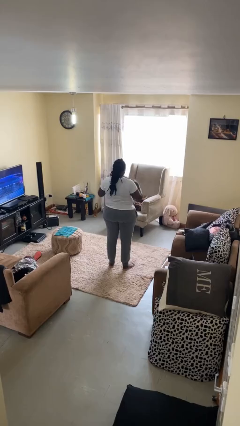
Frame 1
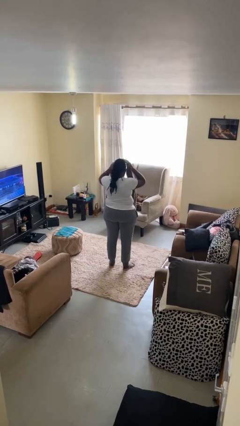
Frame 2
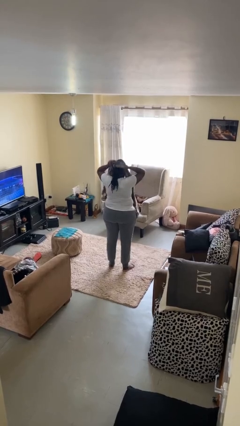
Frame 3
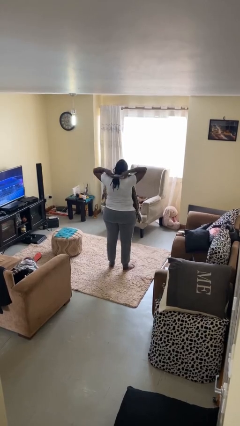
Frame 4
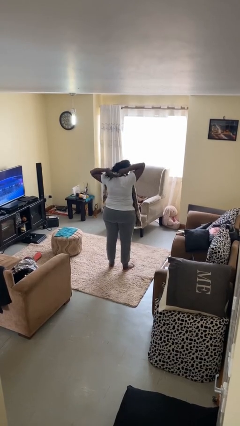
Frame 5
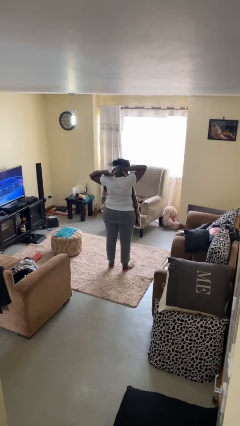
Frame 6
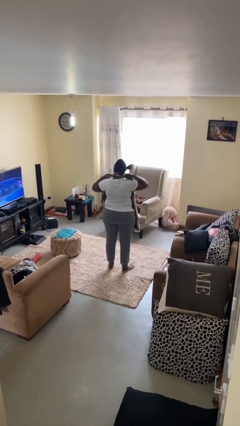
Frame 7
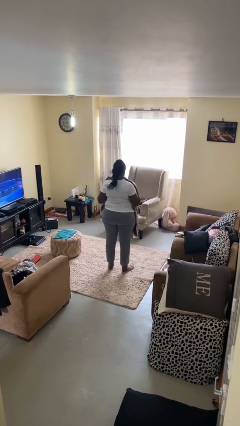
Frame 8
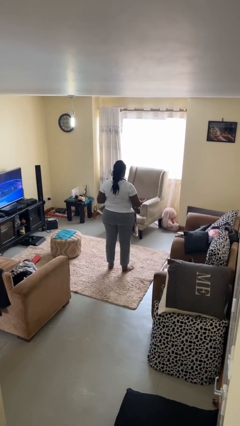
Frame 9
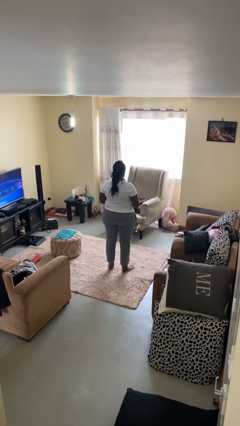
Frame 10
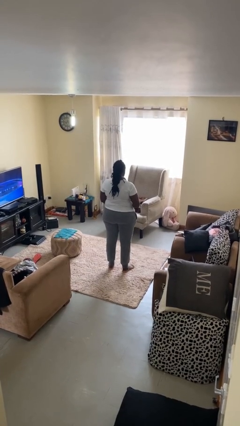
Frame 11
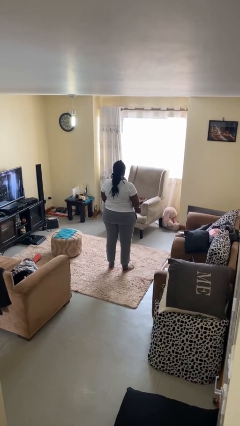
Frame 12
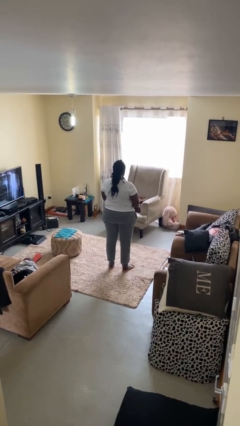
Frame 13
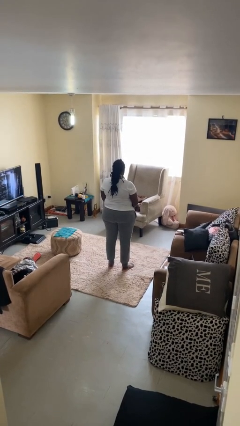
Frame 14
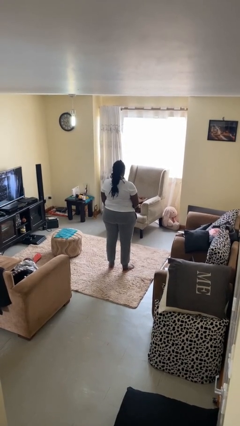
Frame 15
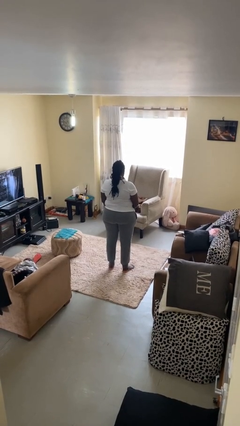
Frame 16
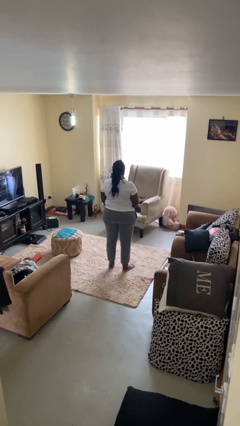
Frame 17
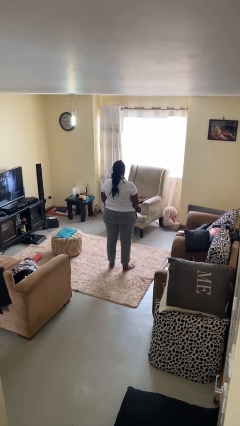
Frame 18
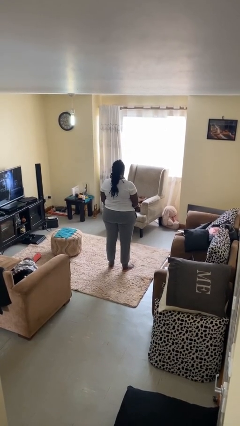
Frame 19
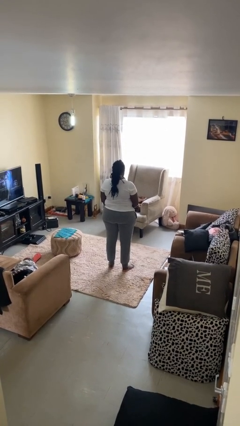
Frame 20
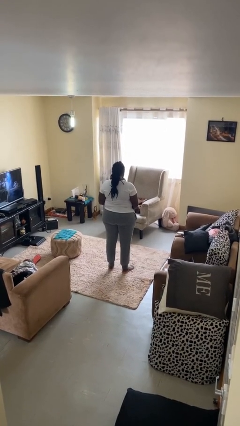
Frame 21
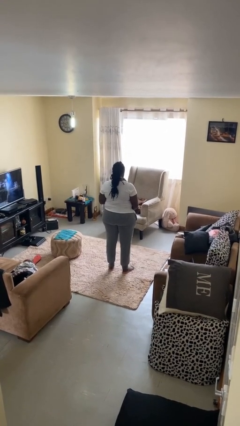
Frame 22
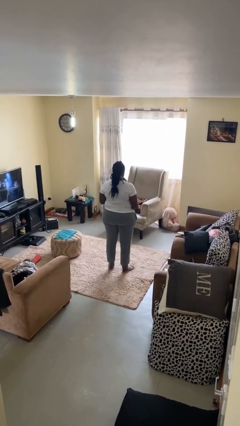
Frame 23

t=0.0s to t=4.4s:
person puts on scarf

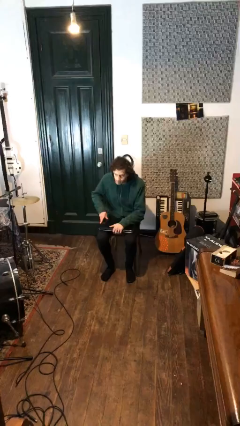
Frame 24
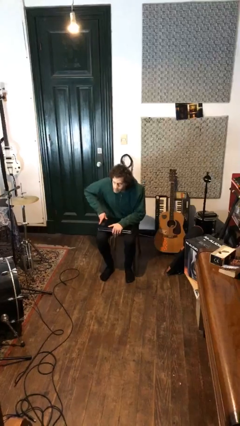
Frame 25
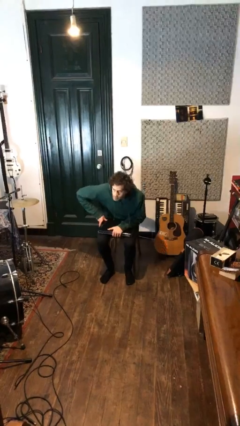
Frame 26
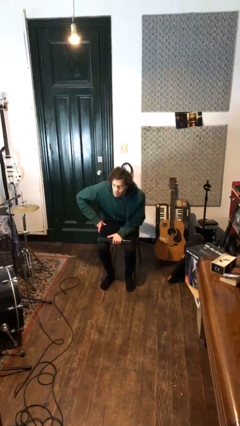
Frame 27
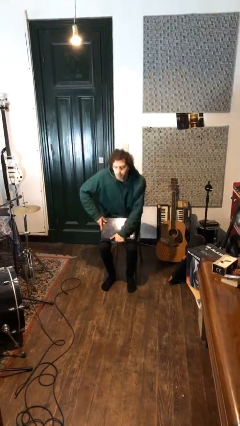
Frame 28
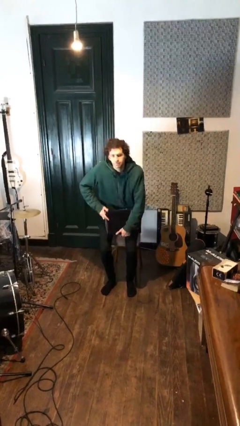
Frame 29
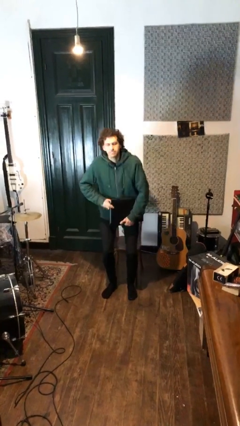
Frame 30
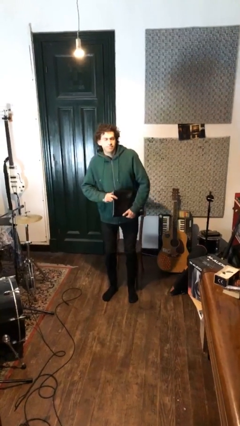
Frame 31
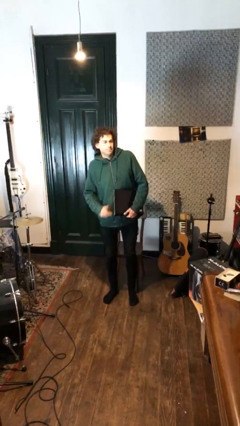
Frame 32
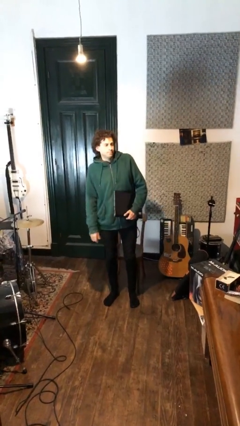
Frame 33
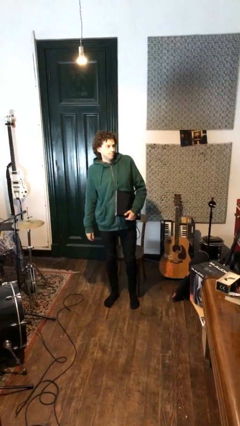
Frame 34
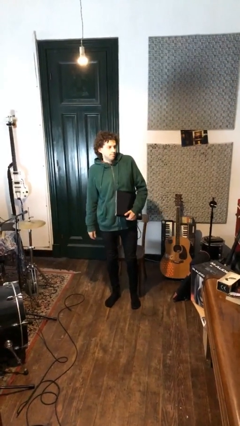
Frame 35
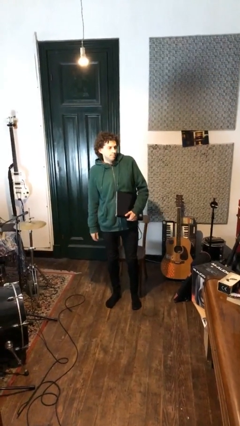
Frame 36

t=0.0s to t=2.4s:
person stands up

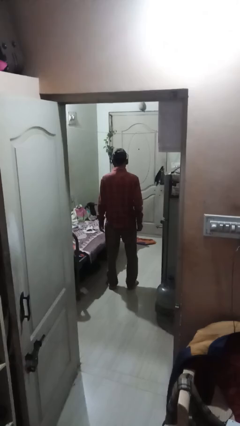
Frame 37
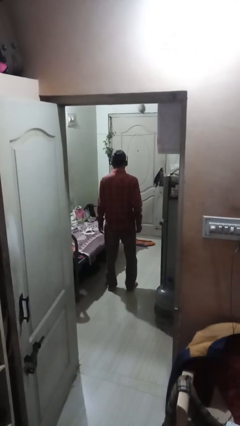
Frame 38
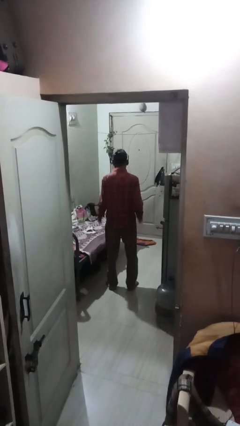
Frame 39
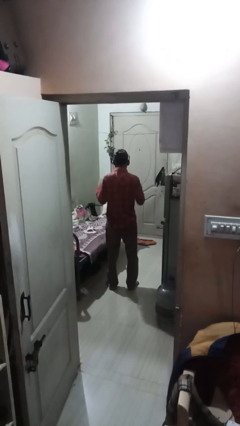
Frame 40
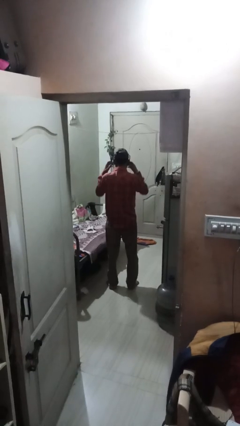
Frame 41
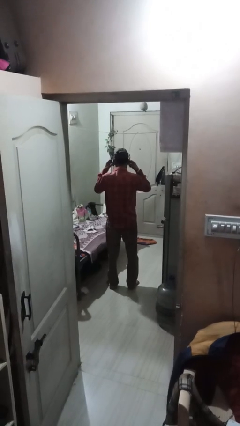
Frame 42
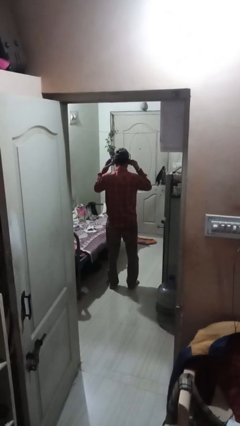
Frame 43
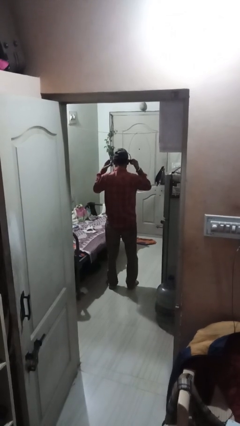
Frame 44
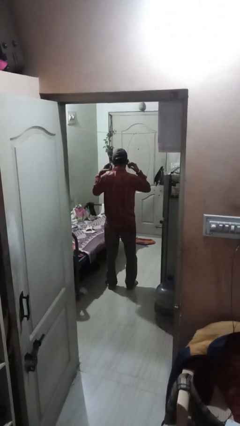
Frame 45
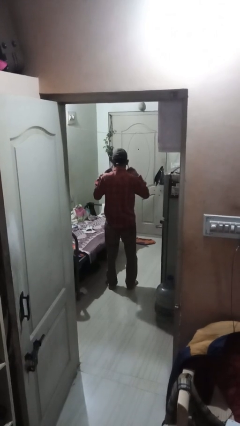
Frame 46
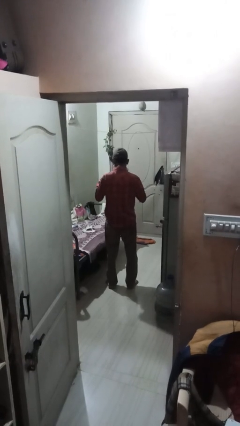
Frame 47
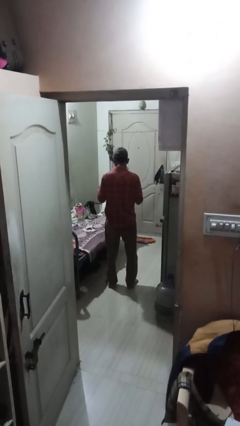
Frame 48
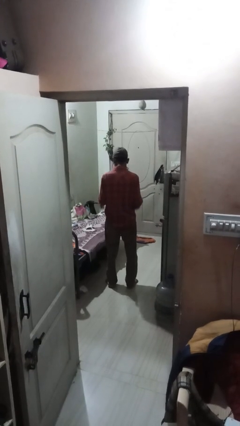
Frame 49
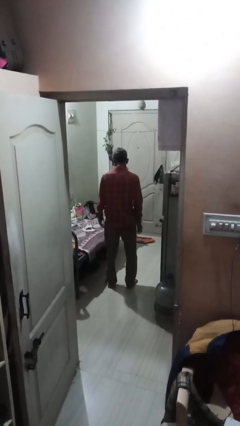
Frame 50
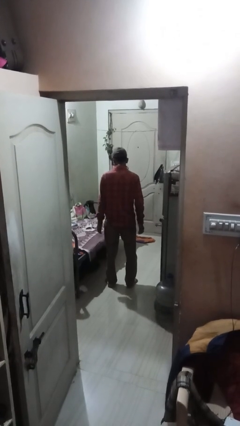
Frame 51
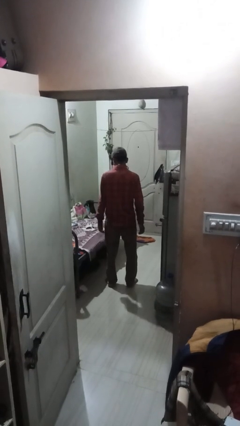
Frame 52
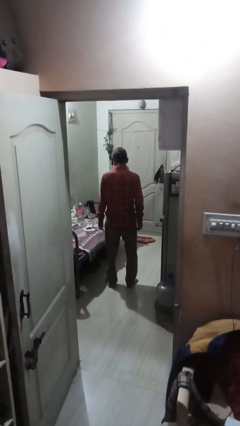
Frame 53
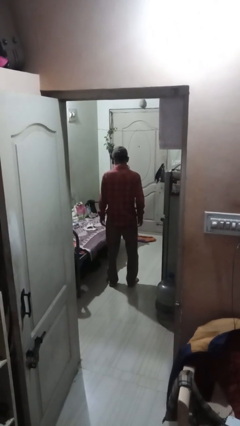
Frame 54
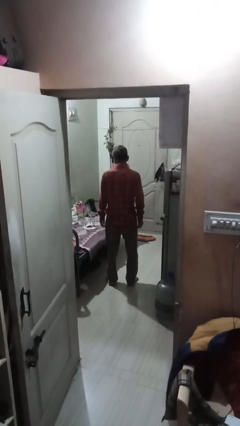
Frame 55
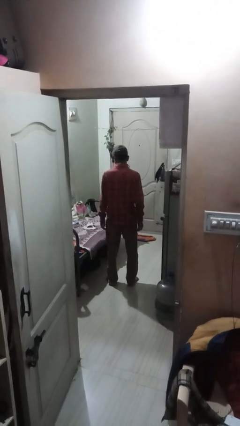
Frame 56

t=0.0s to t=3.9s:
person takes off headphones

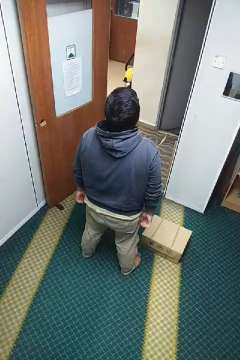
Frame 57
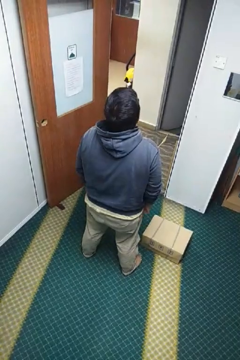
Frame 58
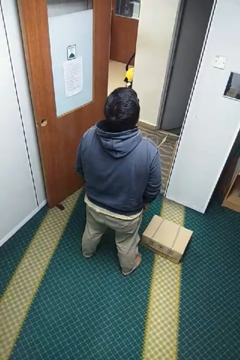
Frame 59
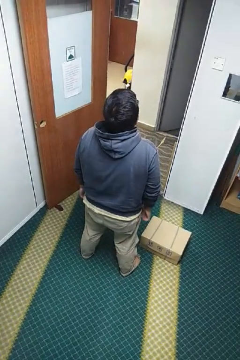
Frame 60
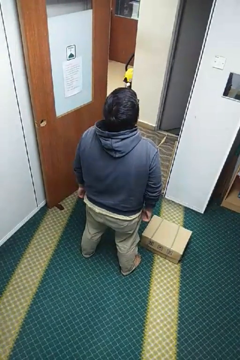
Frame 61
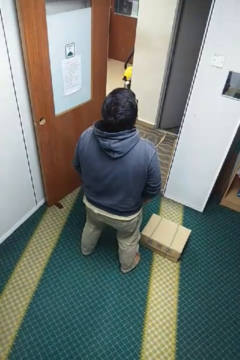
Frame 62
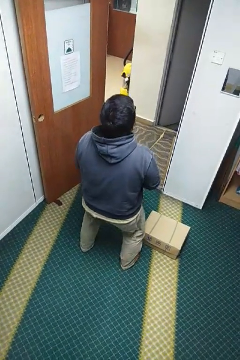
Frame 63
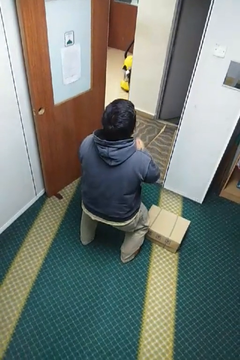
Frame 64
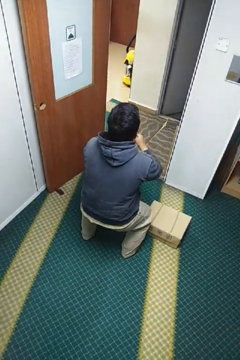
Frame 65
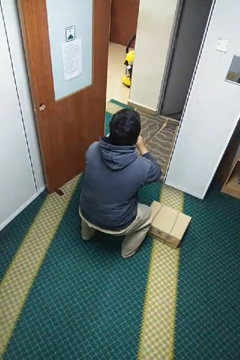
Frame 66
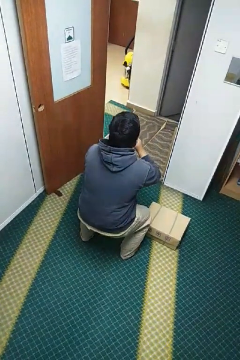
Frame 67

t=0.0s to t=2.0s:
person squats

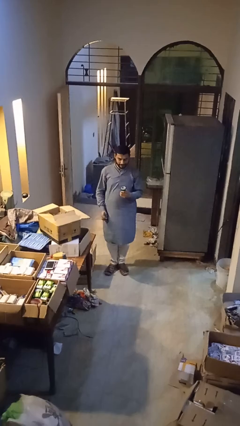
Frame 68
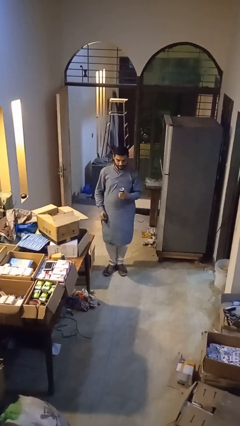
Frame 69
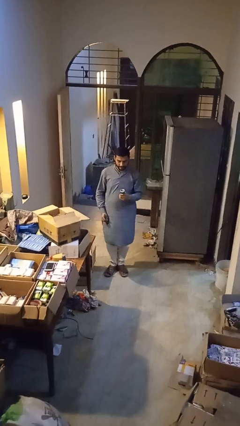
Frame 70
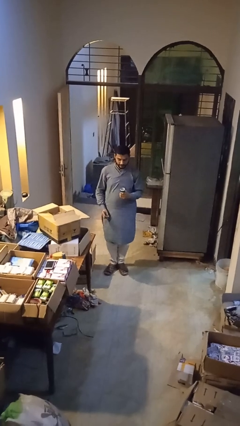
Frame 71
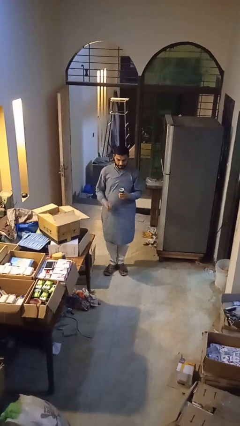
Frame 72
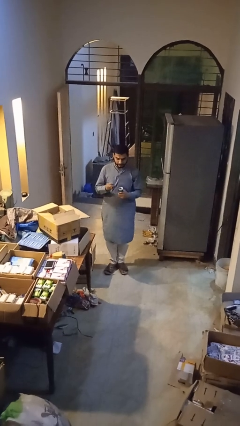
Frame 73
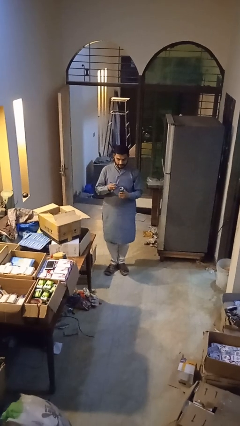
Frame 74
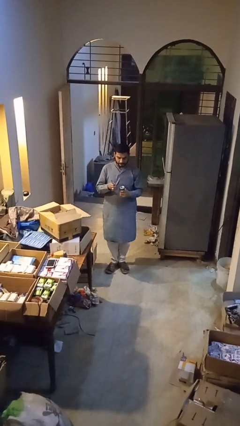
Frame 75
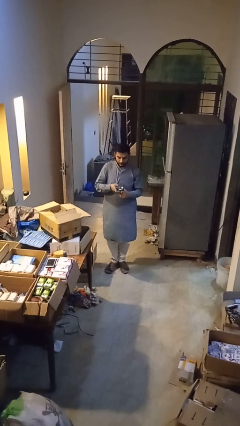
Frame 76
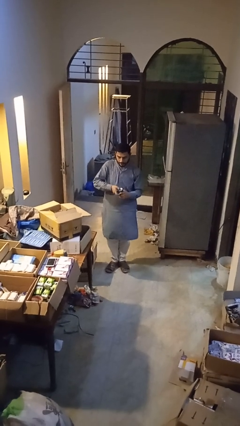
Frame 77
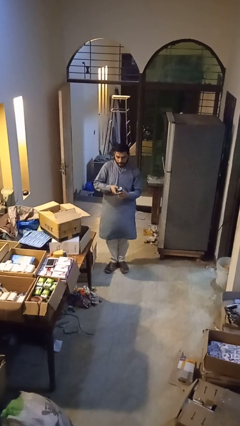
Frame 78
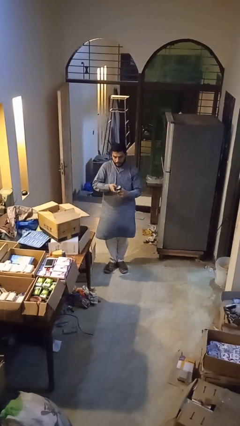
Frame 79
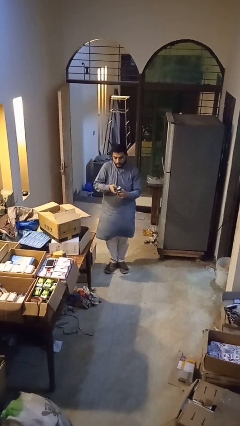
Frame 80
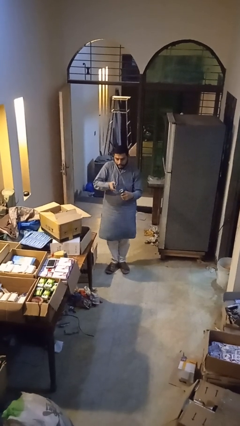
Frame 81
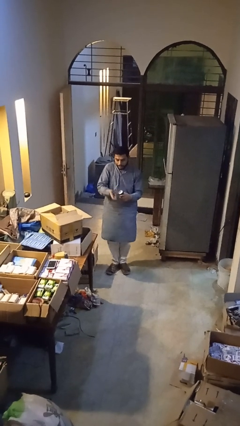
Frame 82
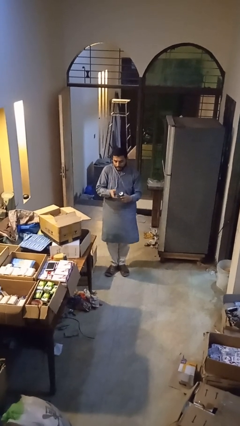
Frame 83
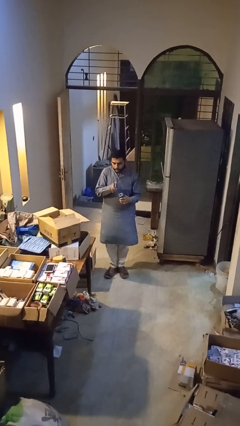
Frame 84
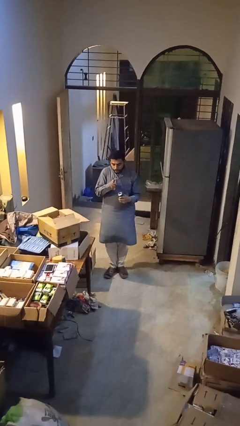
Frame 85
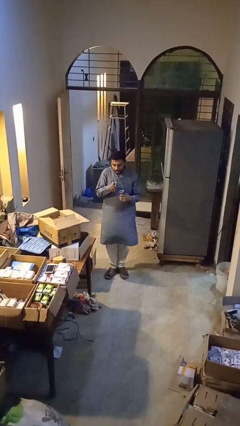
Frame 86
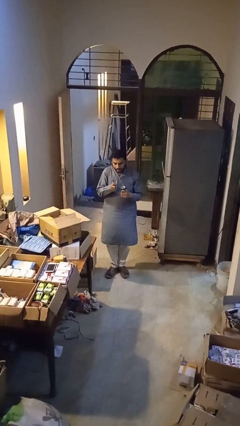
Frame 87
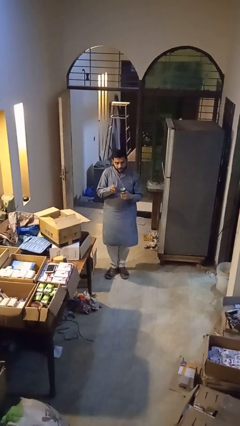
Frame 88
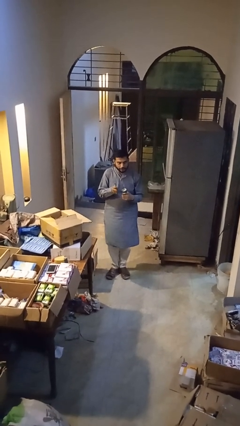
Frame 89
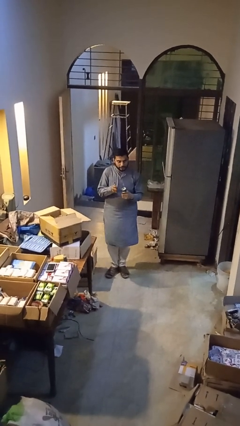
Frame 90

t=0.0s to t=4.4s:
person opens can with can opener

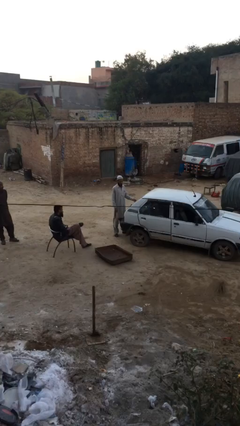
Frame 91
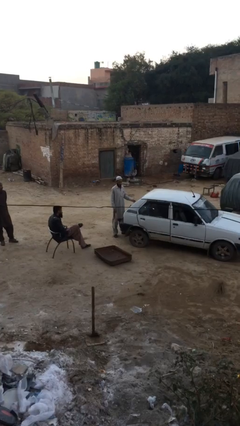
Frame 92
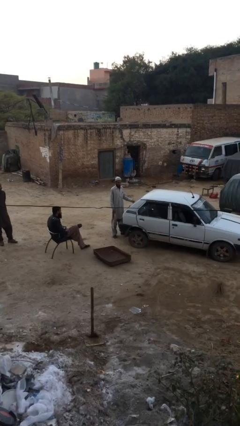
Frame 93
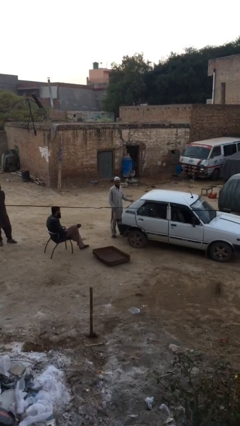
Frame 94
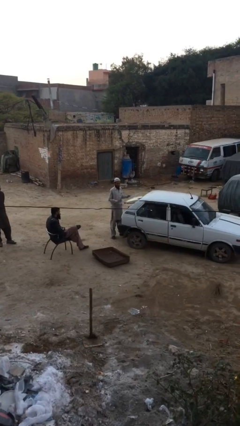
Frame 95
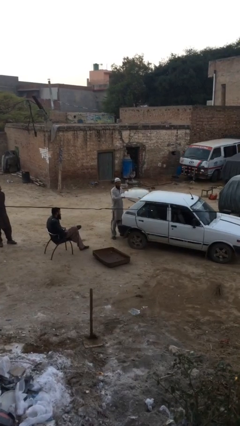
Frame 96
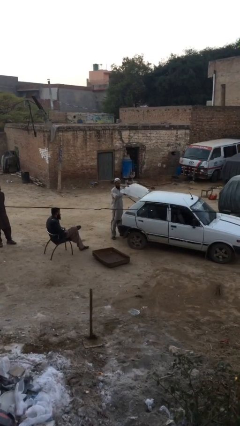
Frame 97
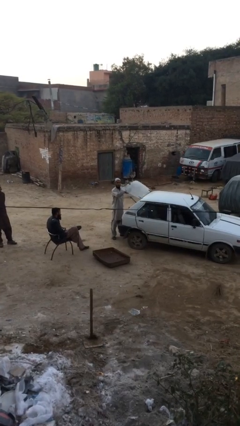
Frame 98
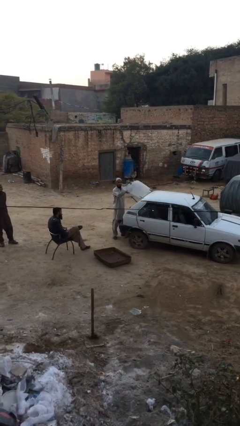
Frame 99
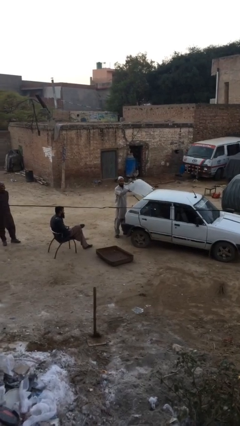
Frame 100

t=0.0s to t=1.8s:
person opens car trunk
